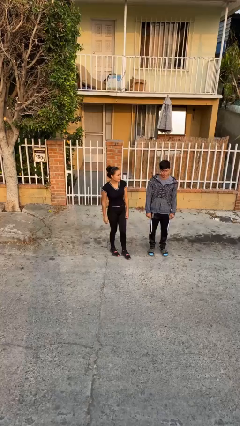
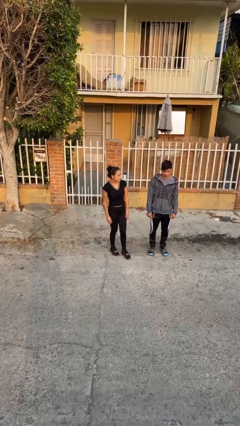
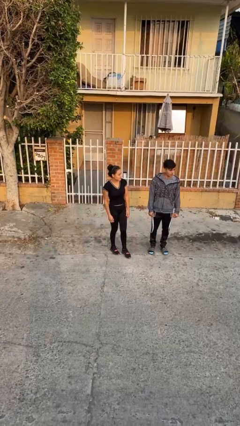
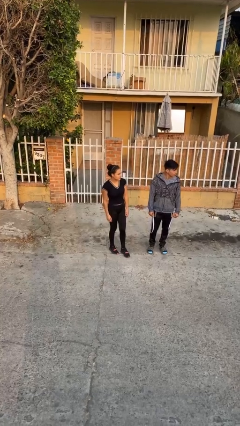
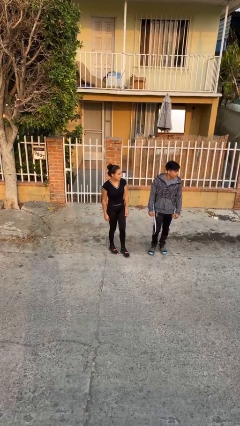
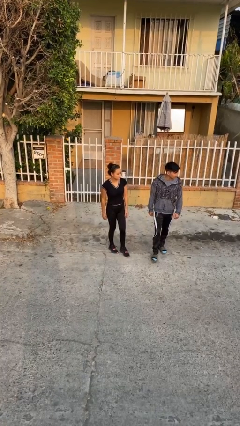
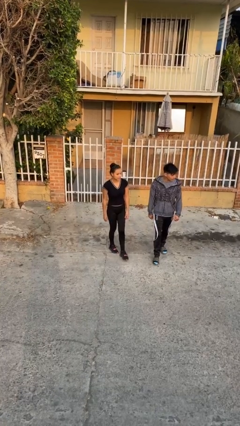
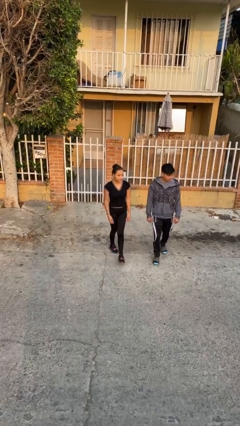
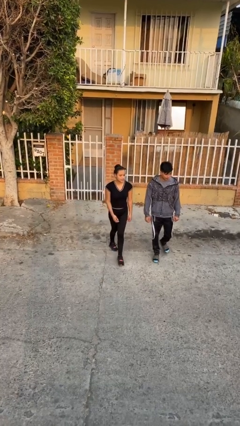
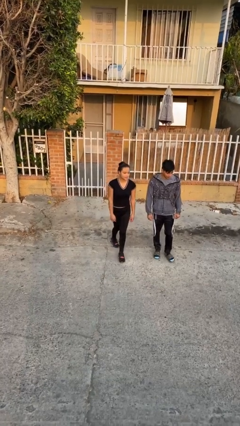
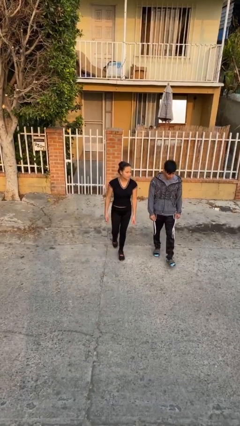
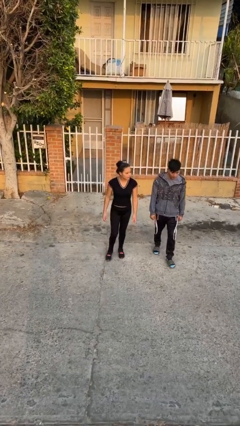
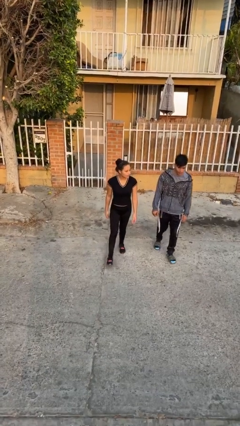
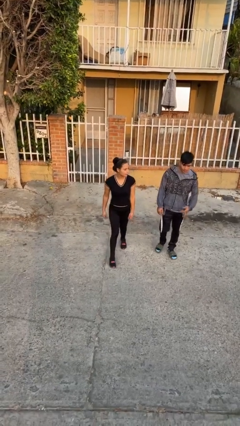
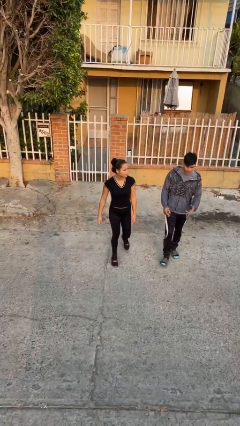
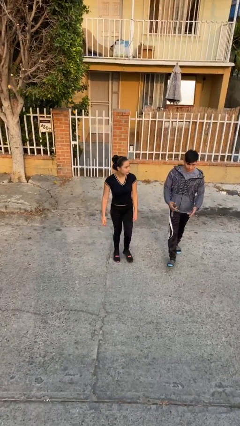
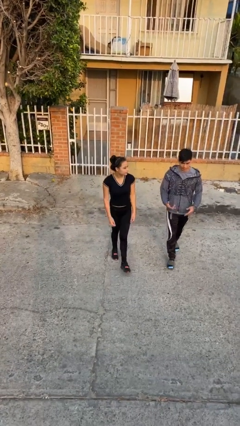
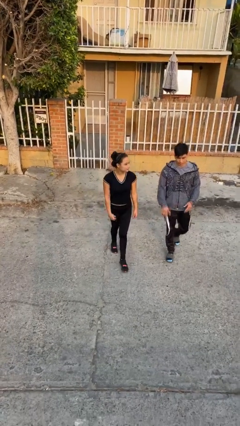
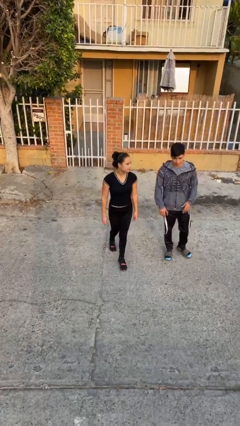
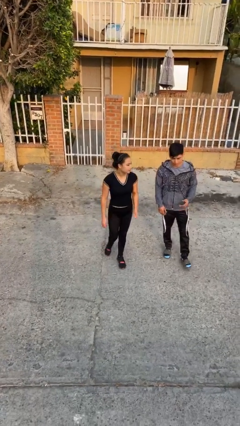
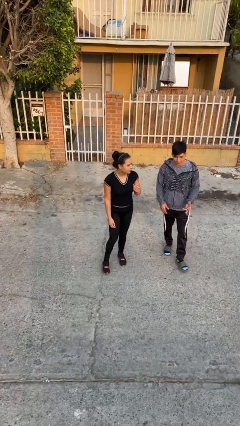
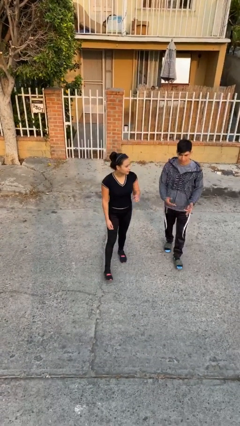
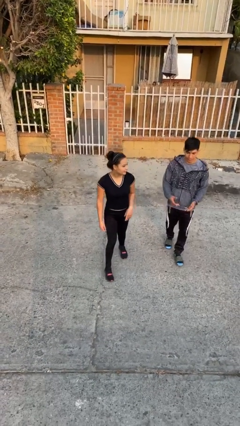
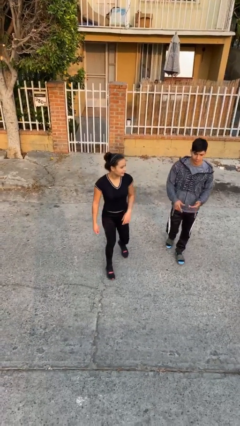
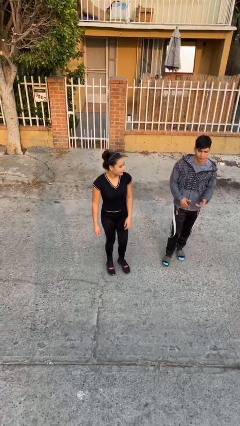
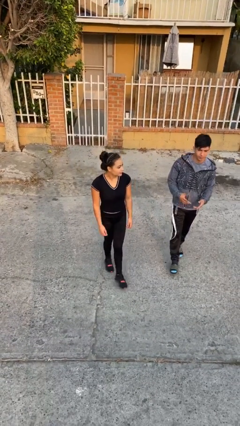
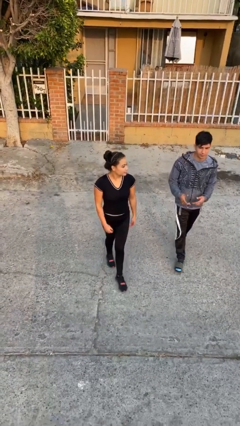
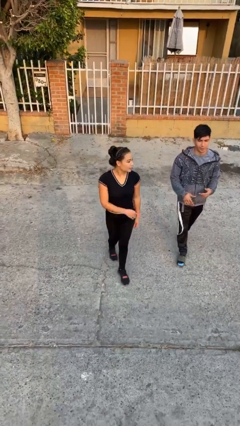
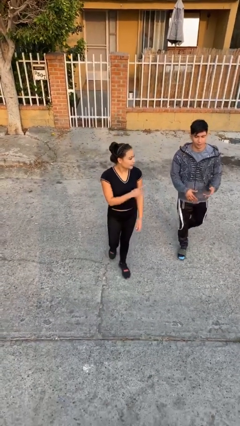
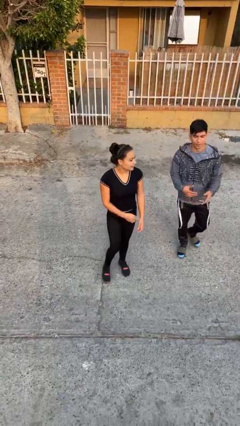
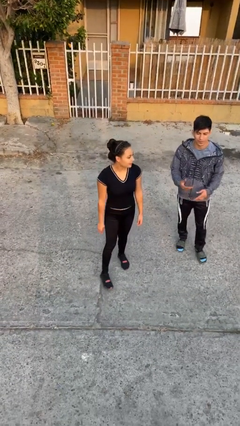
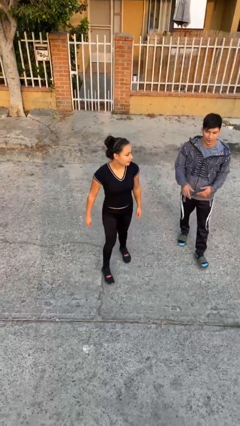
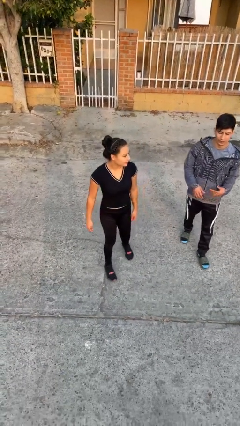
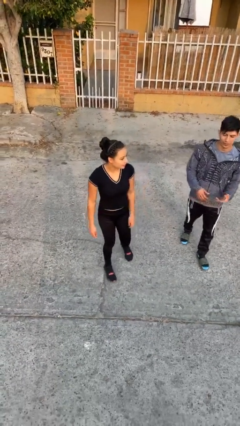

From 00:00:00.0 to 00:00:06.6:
person talks to person

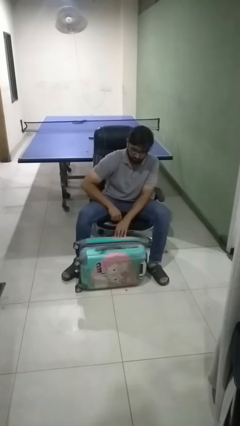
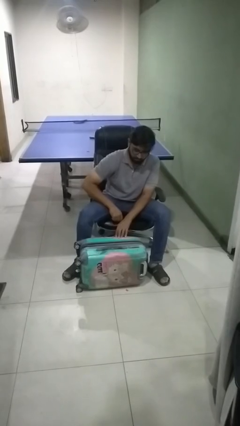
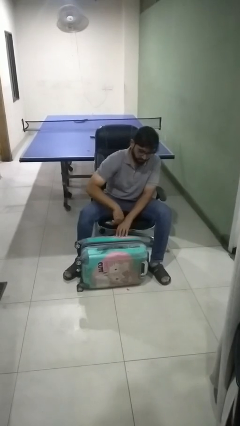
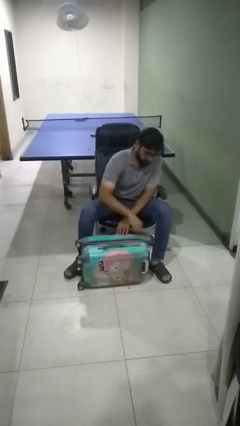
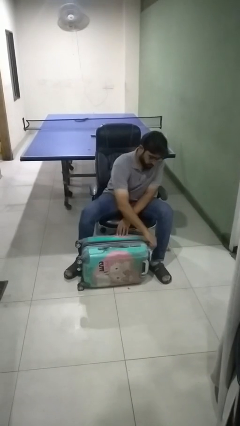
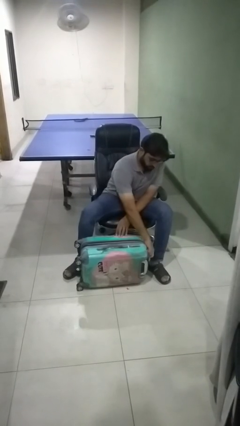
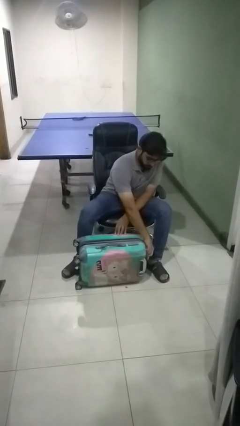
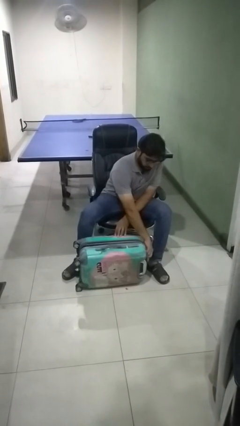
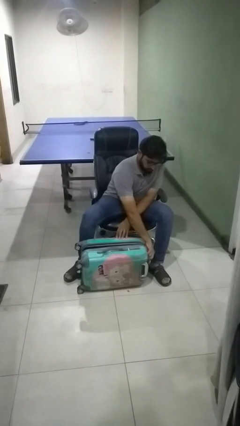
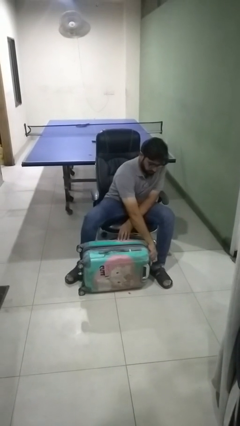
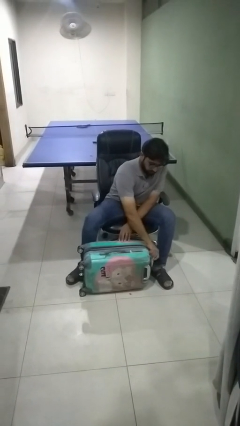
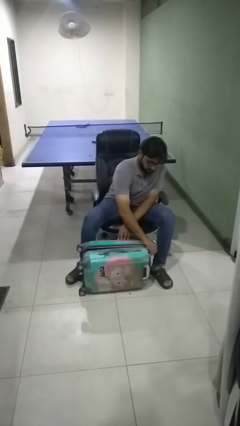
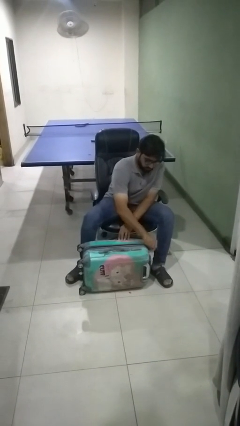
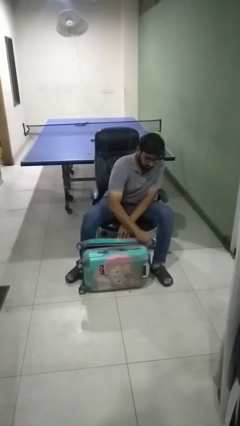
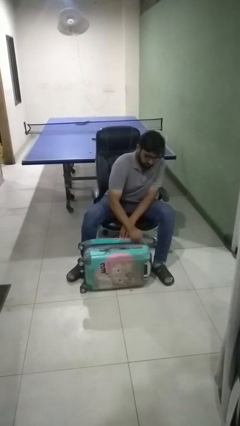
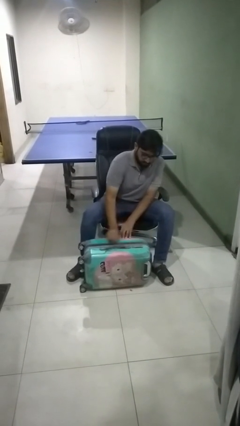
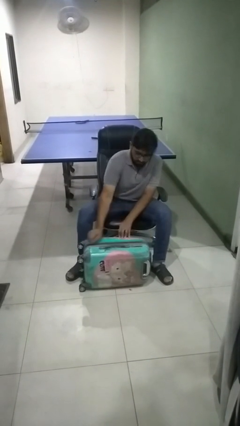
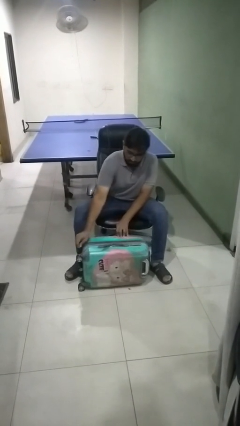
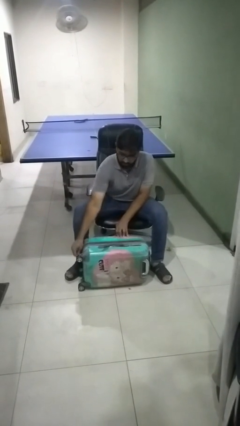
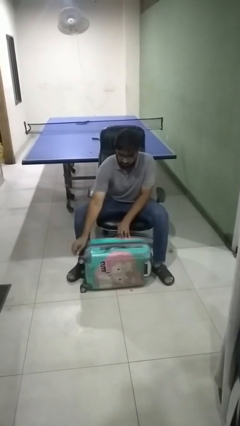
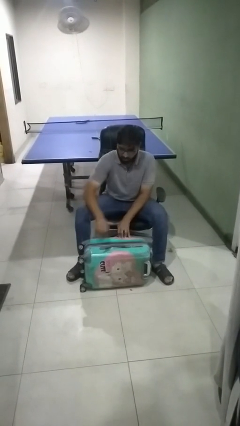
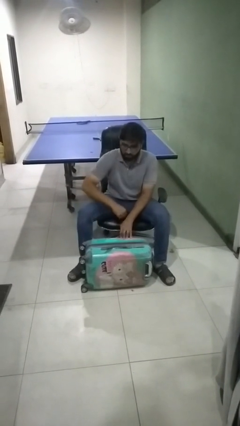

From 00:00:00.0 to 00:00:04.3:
person closes suitcase

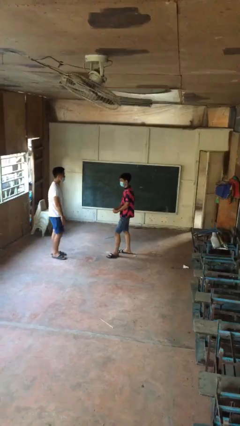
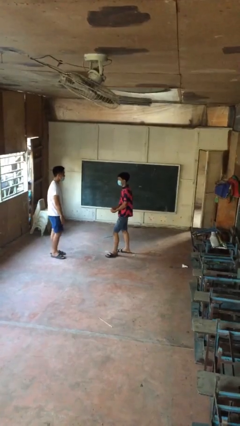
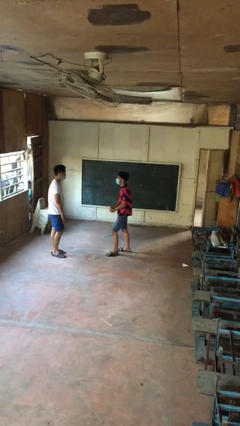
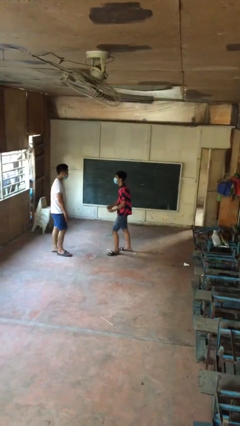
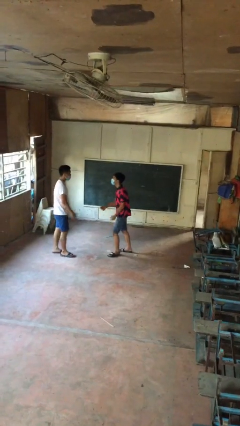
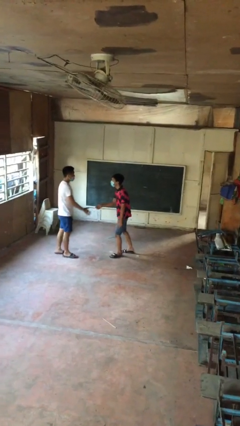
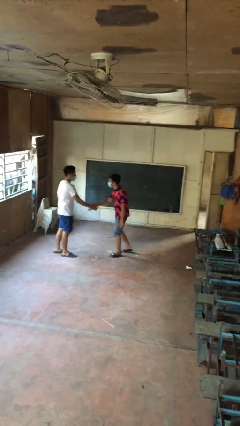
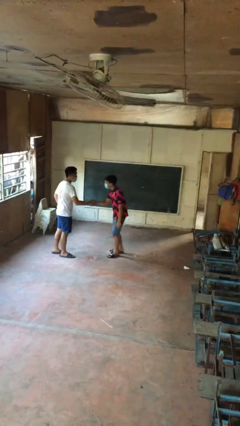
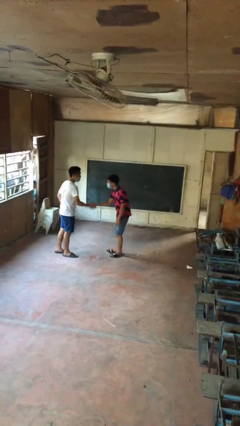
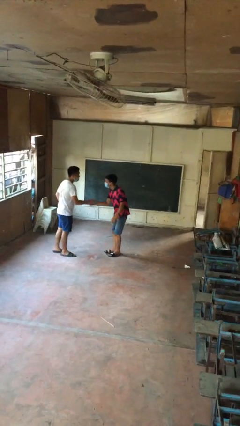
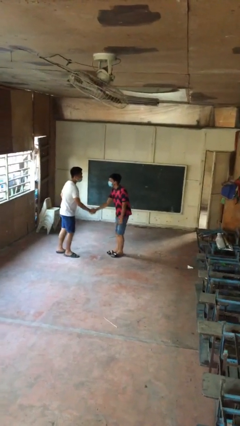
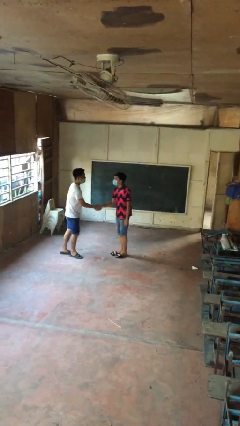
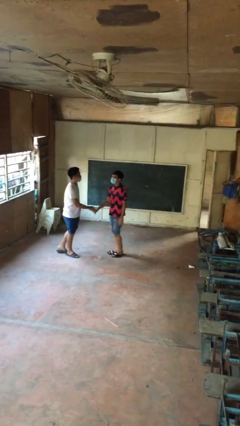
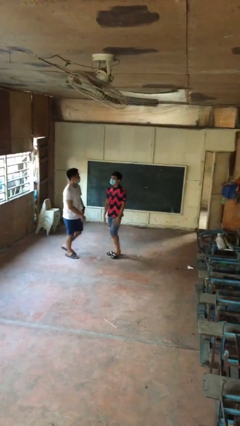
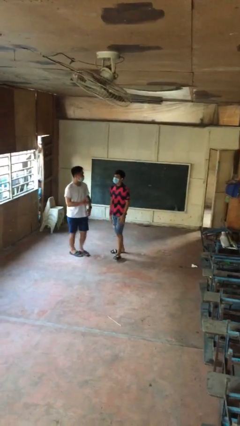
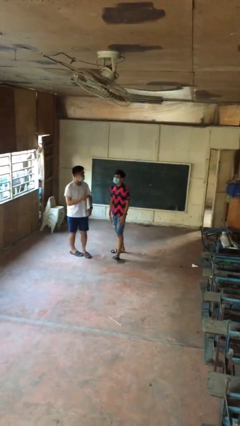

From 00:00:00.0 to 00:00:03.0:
person shakes hand

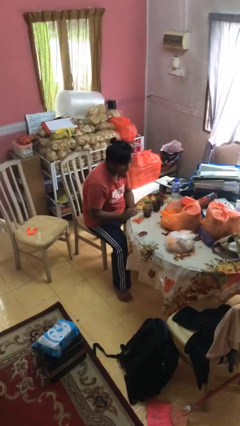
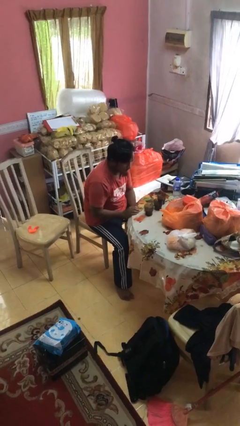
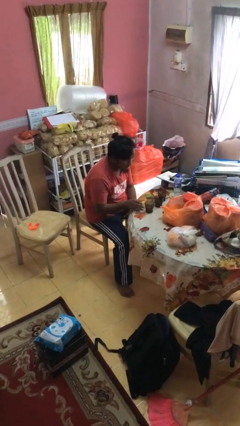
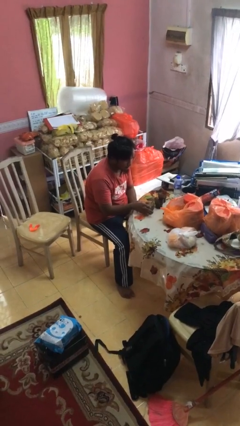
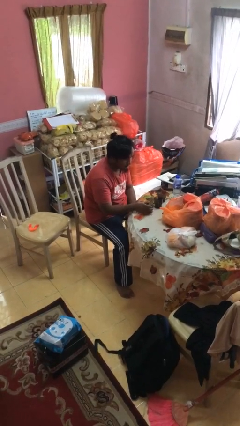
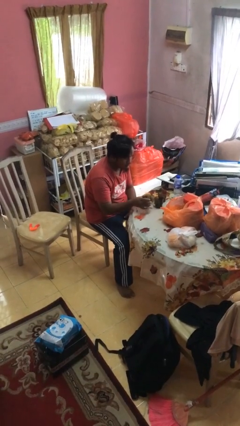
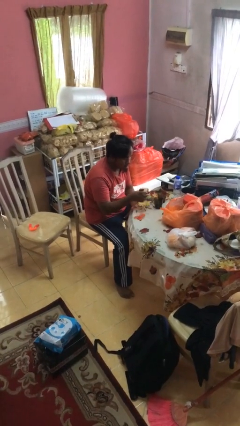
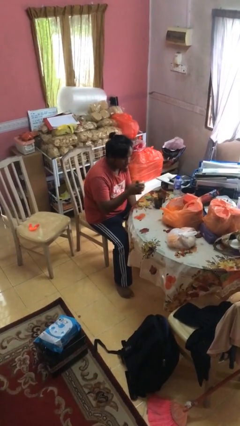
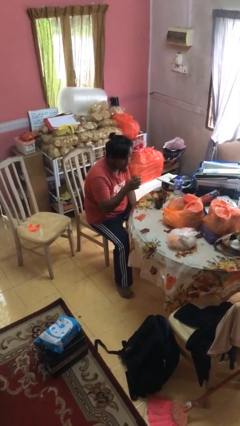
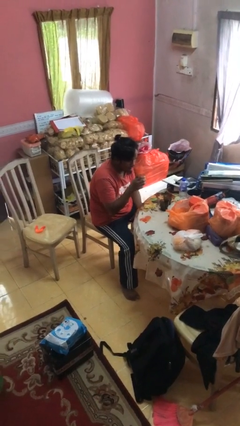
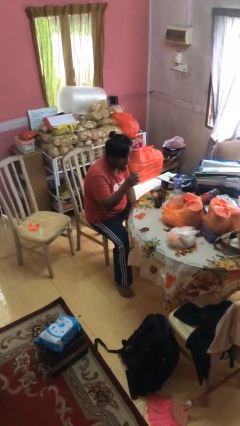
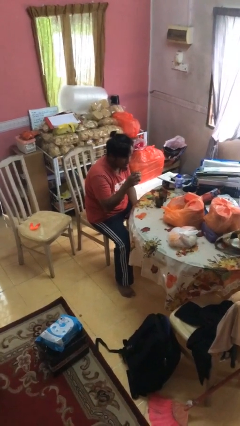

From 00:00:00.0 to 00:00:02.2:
person picks up object from table

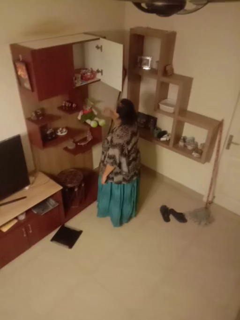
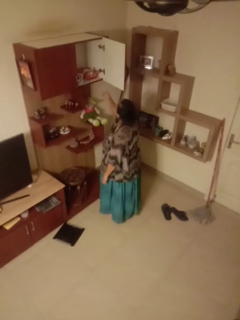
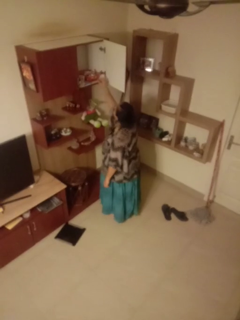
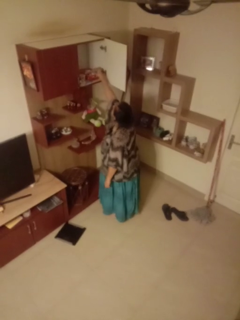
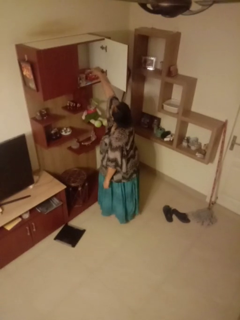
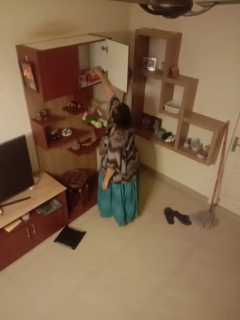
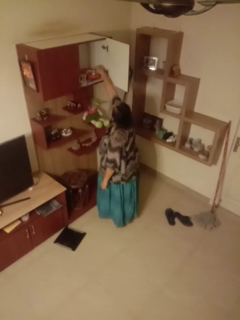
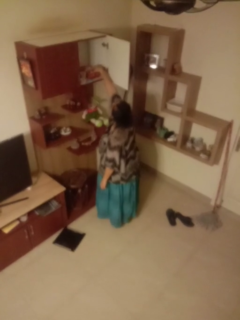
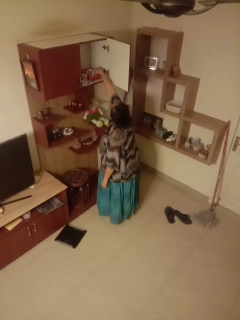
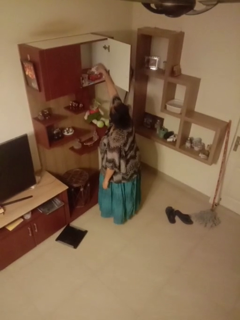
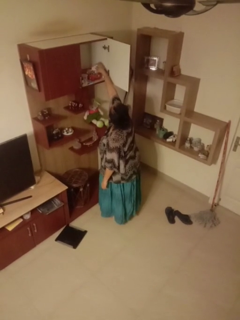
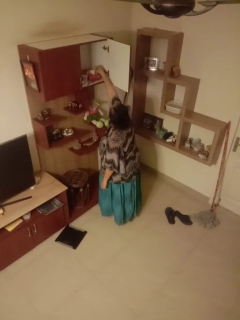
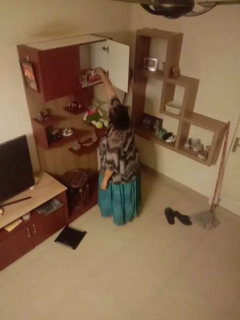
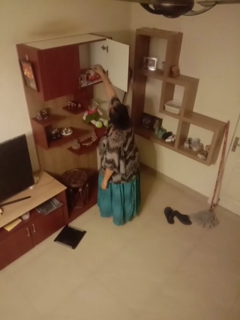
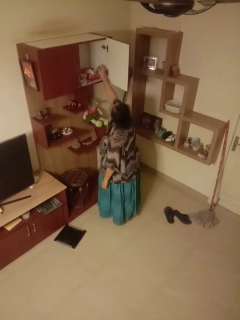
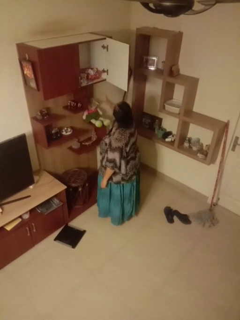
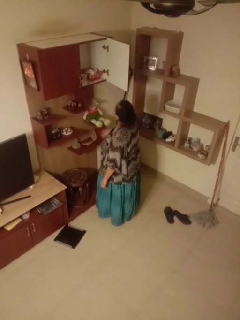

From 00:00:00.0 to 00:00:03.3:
person searches in cabinet
